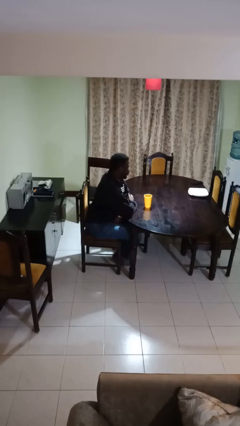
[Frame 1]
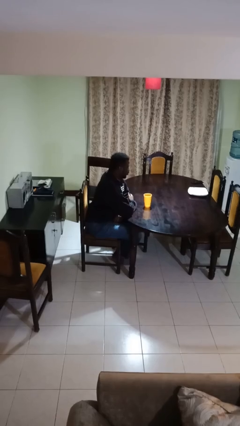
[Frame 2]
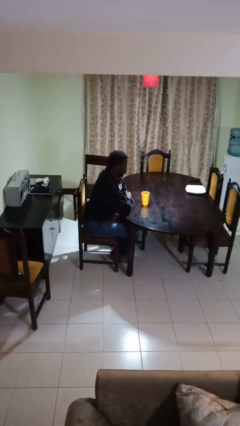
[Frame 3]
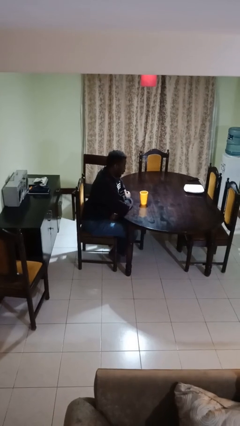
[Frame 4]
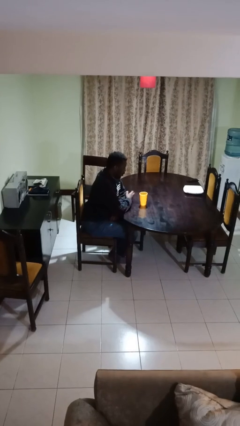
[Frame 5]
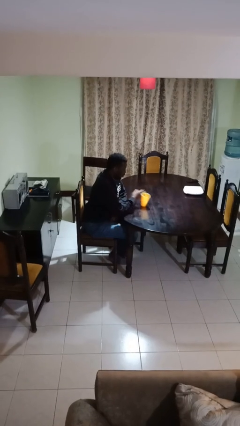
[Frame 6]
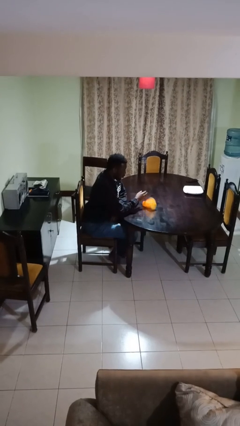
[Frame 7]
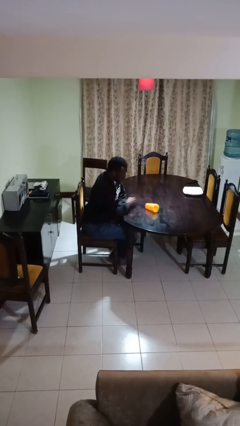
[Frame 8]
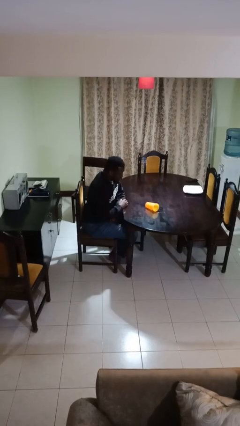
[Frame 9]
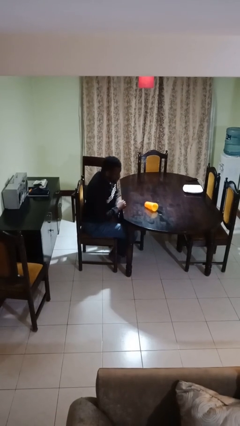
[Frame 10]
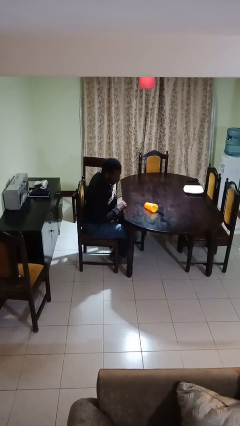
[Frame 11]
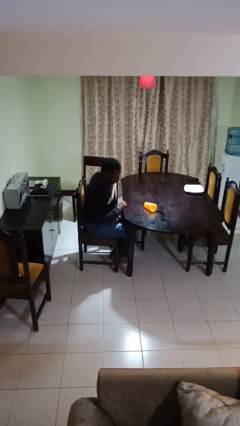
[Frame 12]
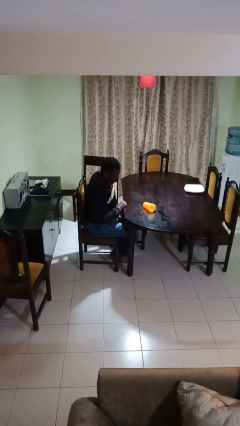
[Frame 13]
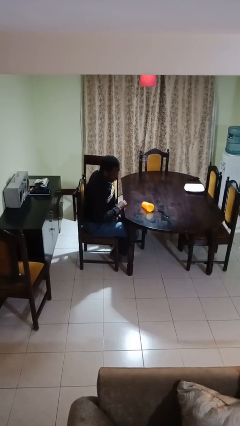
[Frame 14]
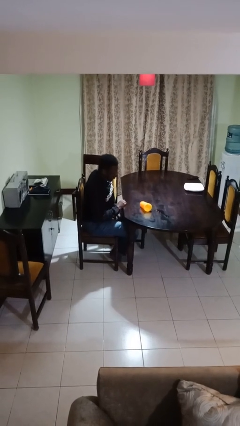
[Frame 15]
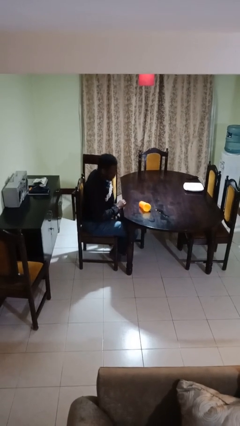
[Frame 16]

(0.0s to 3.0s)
person spills on table

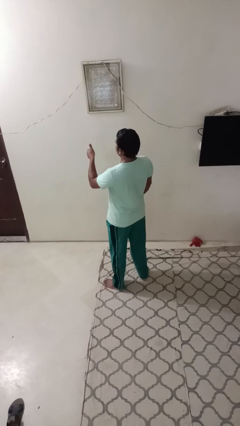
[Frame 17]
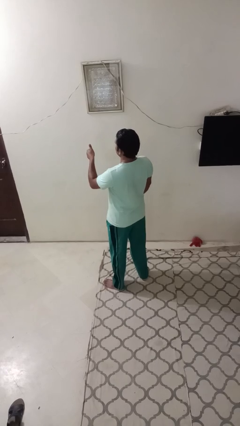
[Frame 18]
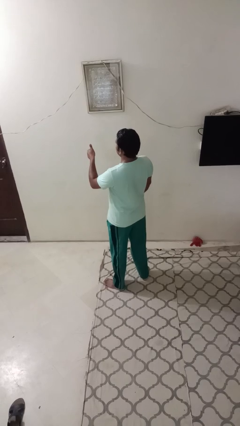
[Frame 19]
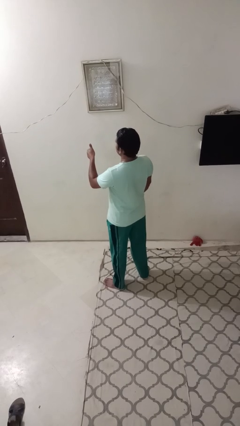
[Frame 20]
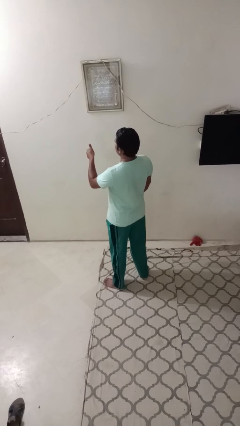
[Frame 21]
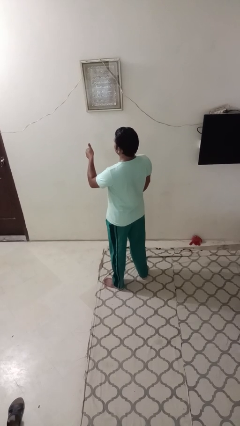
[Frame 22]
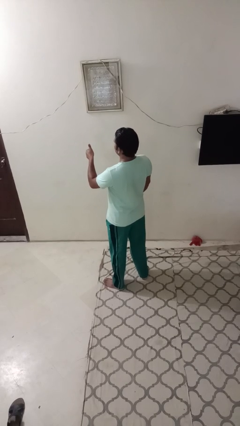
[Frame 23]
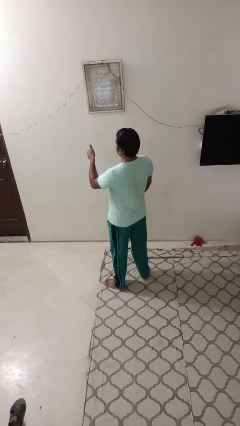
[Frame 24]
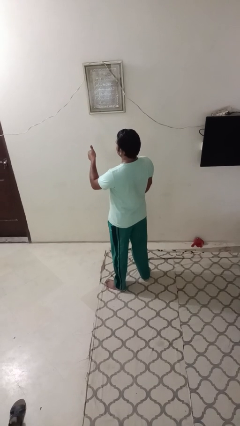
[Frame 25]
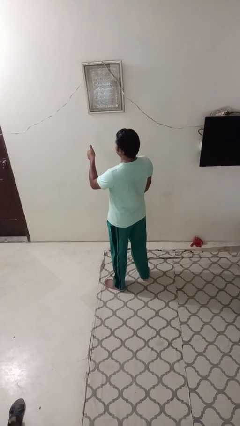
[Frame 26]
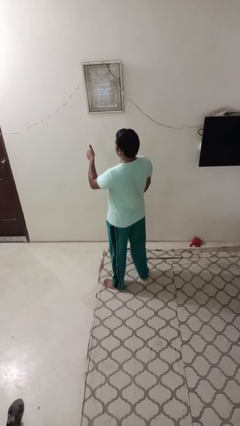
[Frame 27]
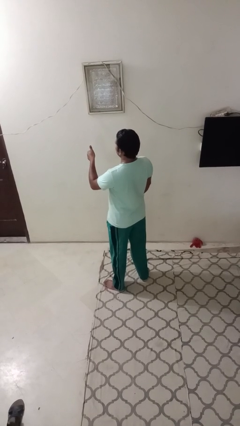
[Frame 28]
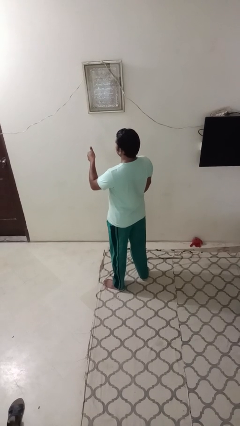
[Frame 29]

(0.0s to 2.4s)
person gestures thumbs up

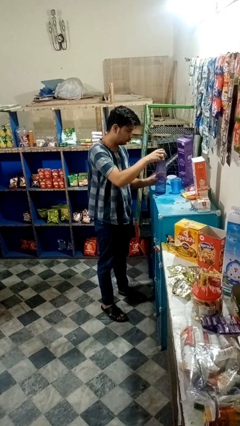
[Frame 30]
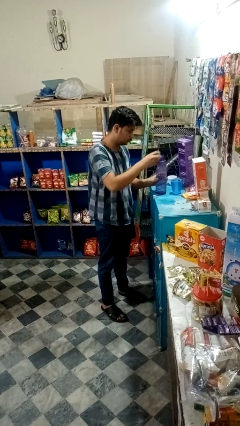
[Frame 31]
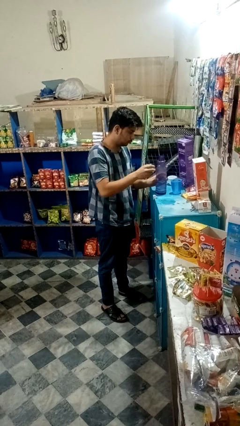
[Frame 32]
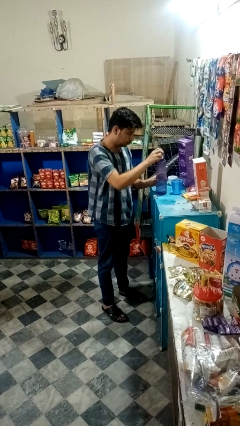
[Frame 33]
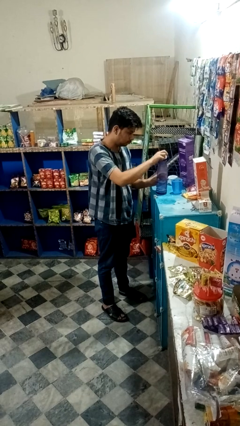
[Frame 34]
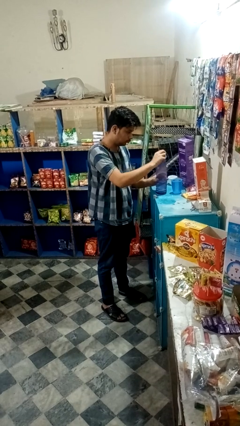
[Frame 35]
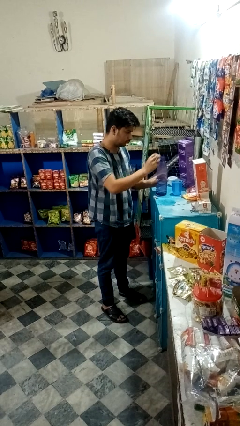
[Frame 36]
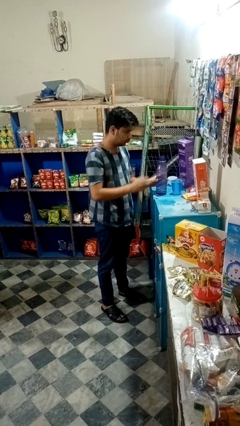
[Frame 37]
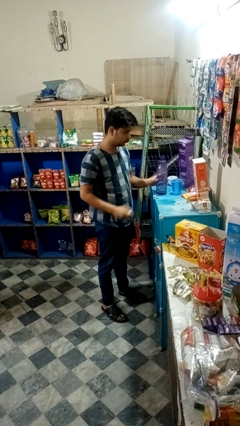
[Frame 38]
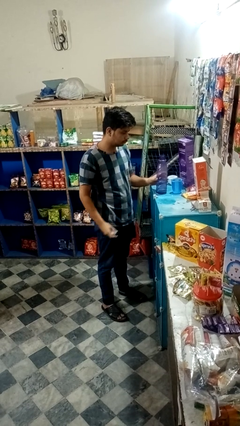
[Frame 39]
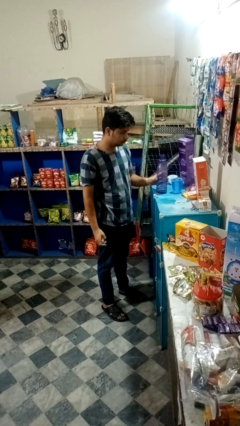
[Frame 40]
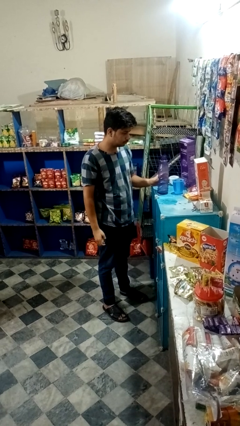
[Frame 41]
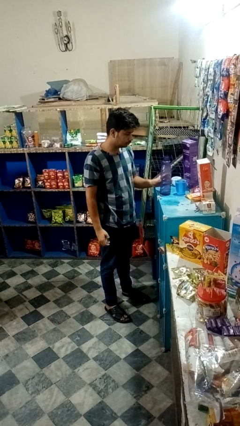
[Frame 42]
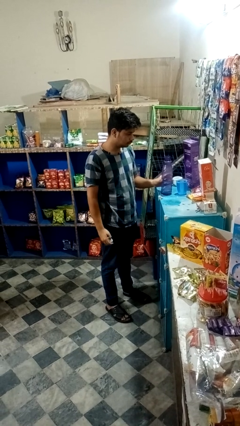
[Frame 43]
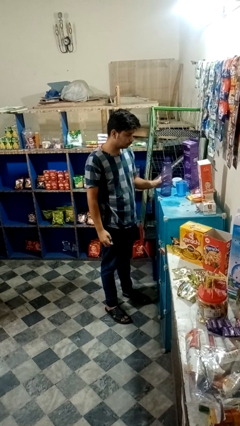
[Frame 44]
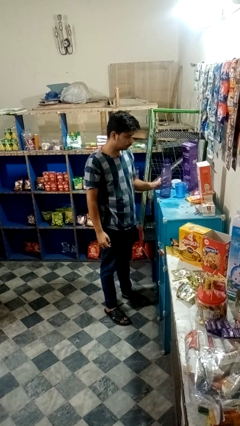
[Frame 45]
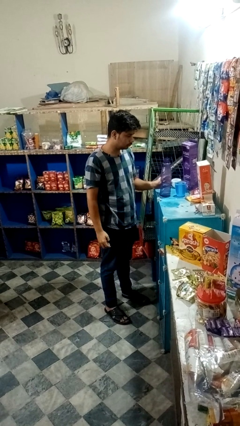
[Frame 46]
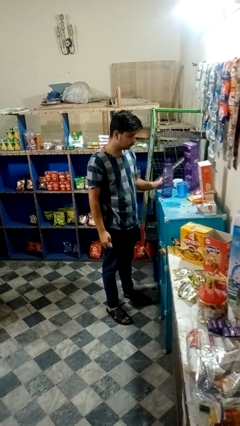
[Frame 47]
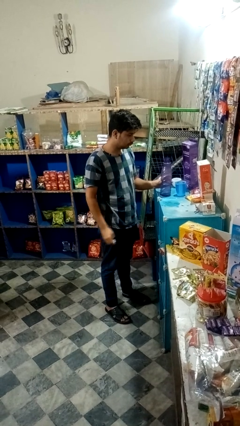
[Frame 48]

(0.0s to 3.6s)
person unscrews lid from bottle

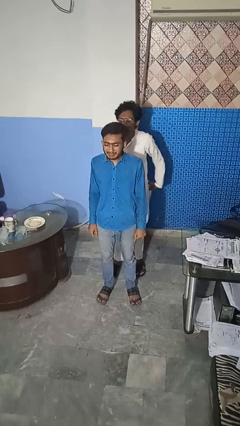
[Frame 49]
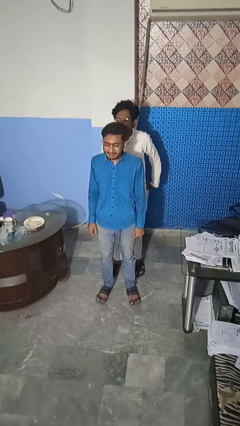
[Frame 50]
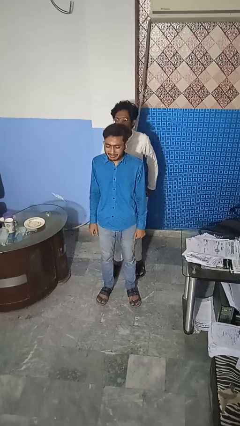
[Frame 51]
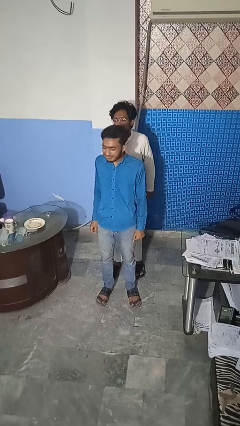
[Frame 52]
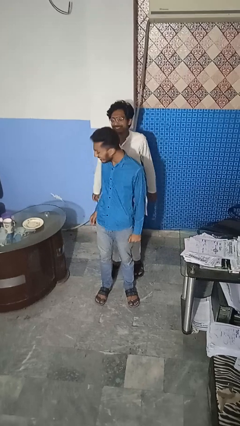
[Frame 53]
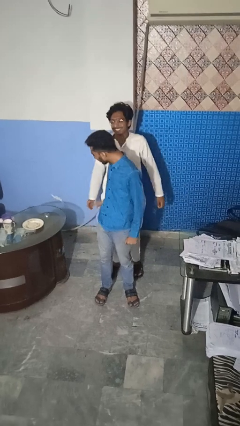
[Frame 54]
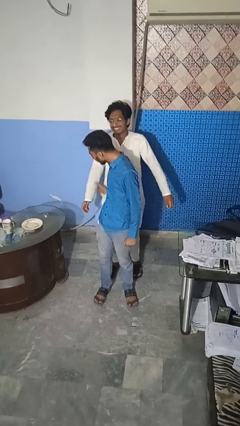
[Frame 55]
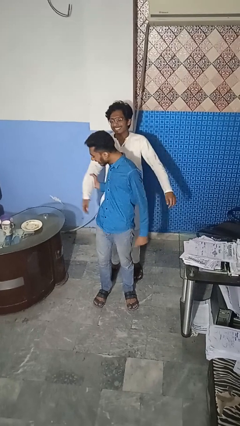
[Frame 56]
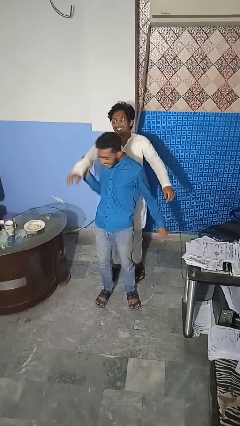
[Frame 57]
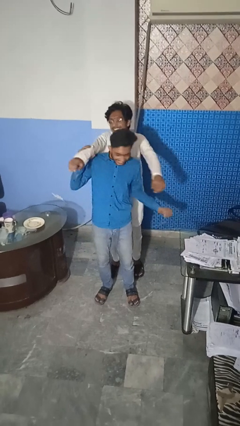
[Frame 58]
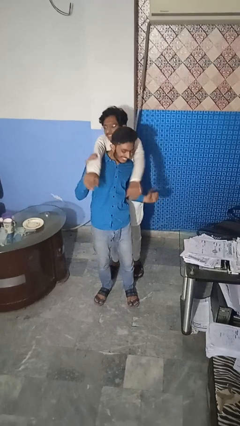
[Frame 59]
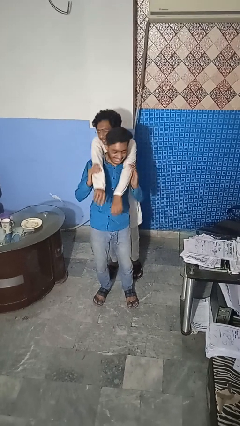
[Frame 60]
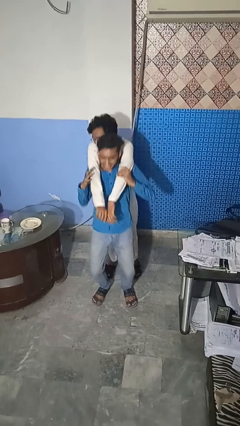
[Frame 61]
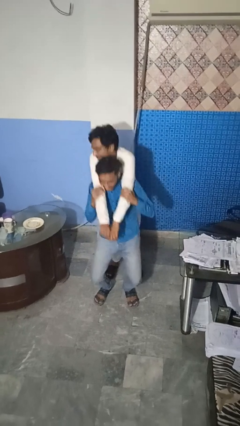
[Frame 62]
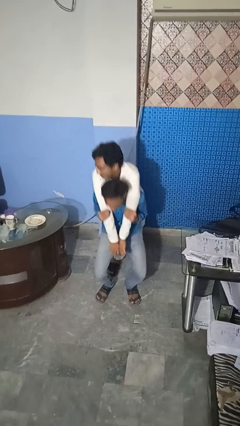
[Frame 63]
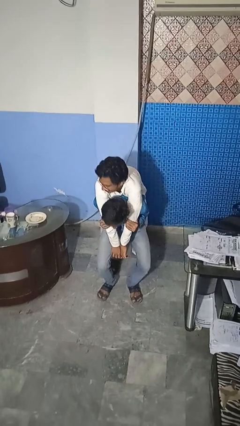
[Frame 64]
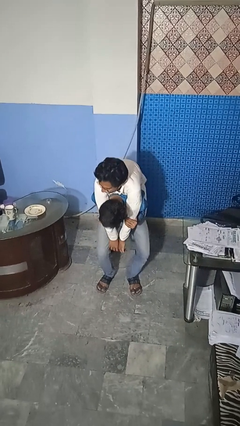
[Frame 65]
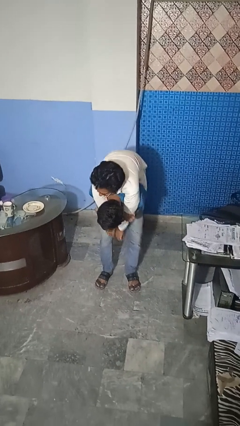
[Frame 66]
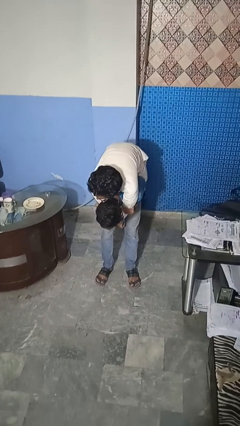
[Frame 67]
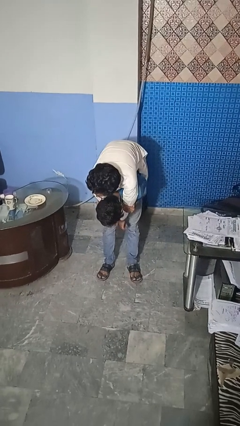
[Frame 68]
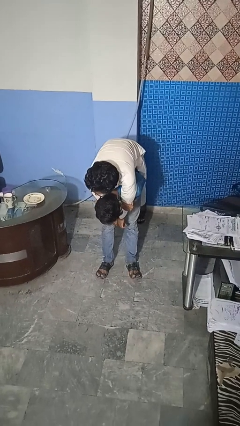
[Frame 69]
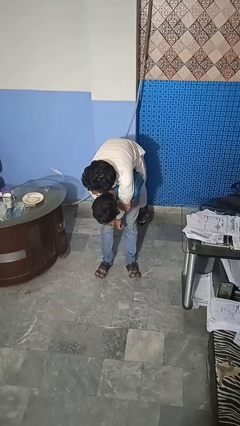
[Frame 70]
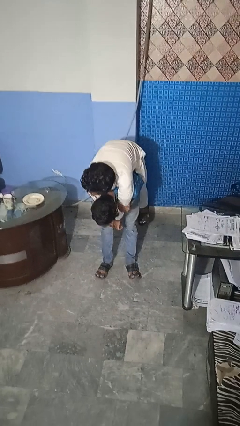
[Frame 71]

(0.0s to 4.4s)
person carries person over shoulder

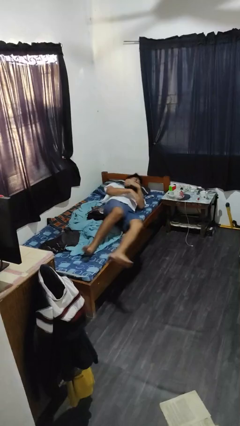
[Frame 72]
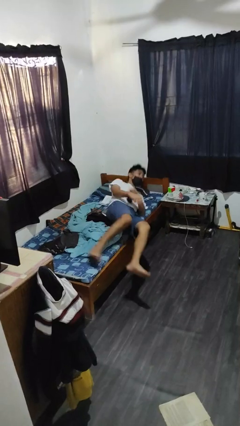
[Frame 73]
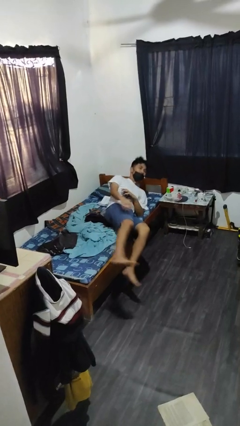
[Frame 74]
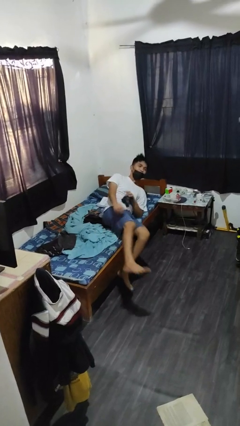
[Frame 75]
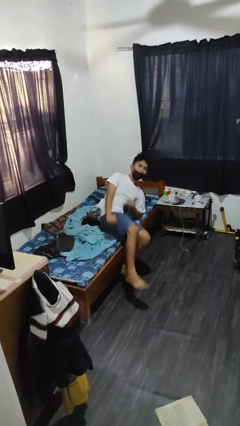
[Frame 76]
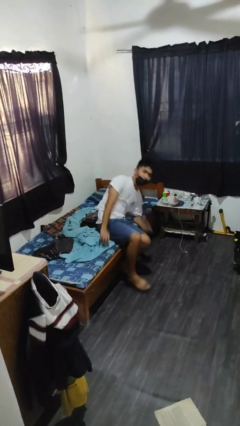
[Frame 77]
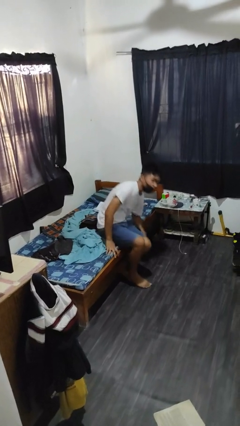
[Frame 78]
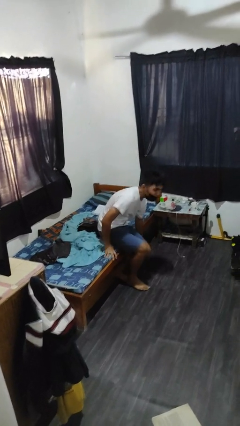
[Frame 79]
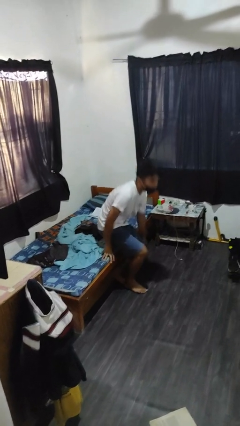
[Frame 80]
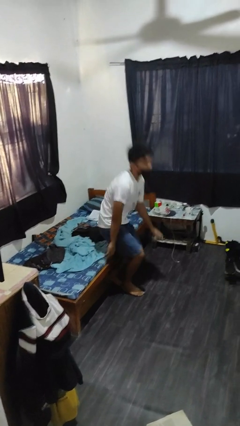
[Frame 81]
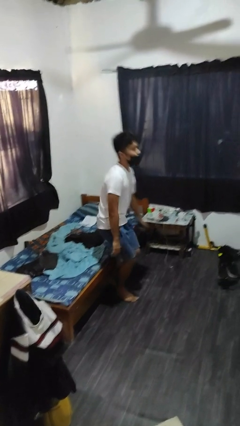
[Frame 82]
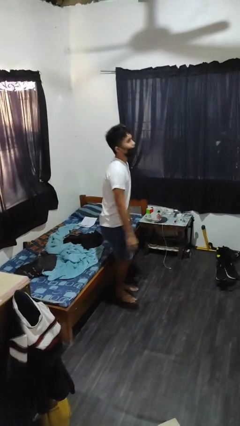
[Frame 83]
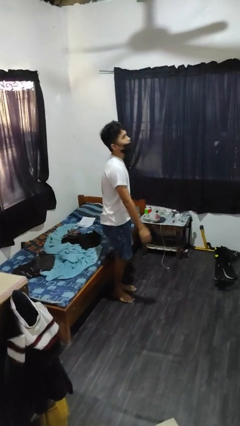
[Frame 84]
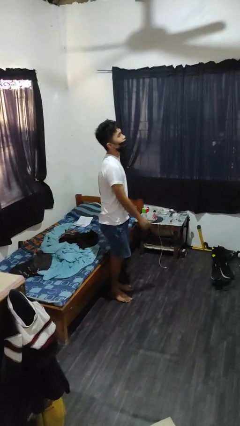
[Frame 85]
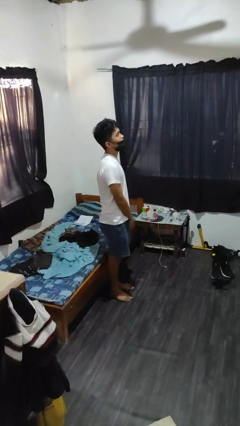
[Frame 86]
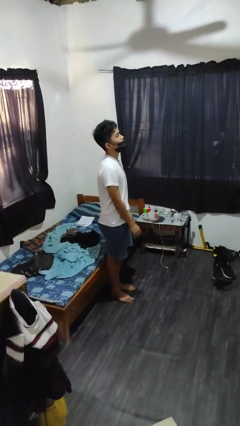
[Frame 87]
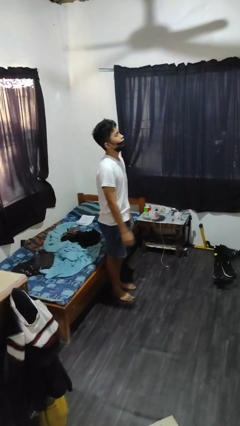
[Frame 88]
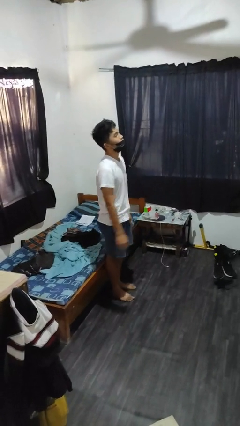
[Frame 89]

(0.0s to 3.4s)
person stands up

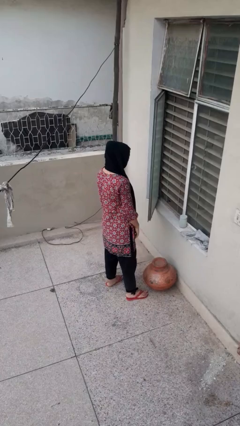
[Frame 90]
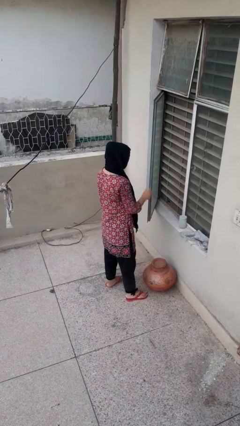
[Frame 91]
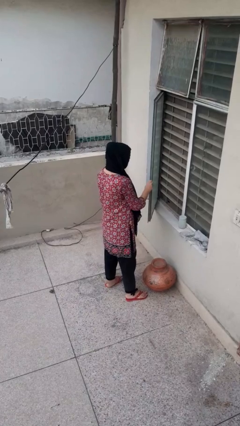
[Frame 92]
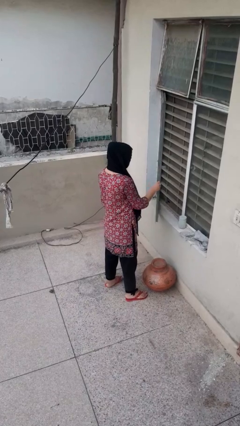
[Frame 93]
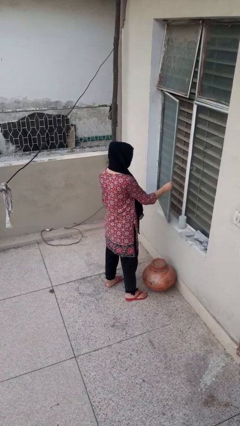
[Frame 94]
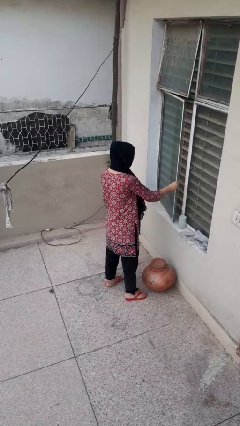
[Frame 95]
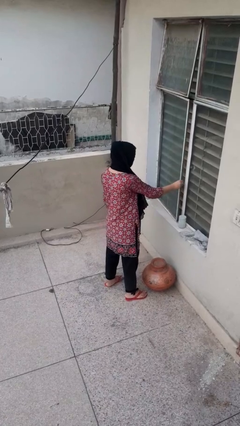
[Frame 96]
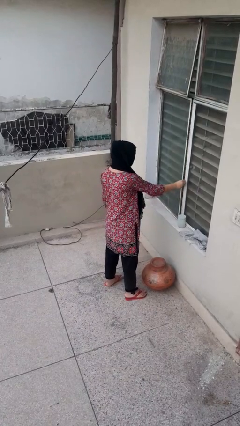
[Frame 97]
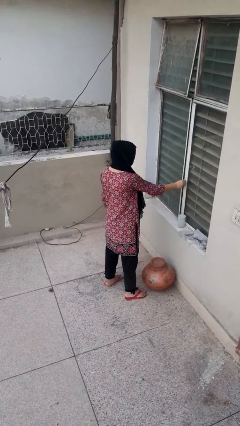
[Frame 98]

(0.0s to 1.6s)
person closes home window
